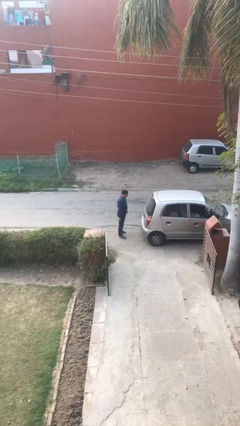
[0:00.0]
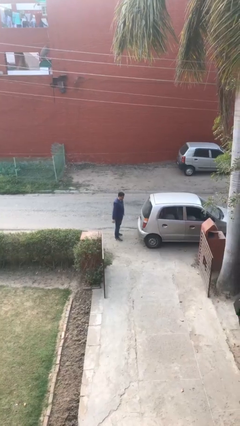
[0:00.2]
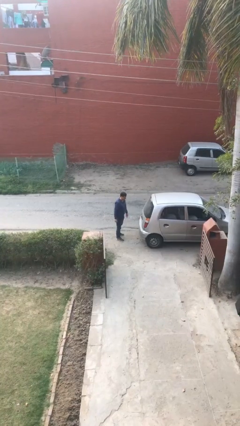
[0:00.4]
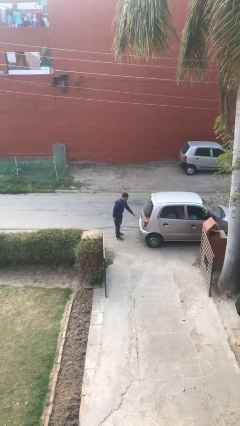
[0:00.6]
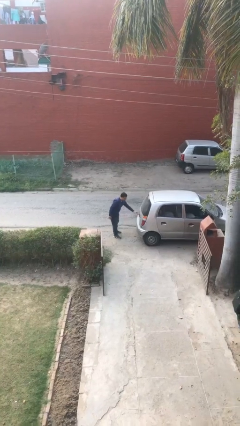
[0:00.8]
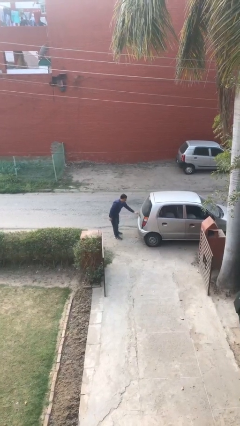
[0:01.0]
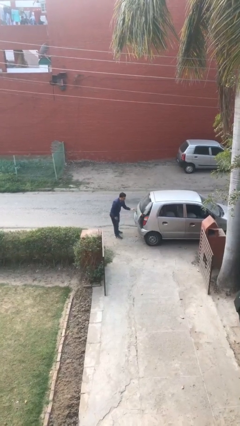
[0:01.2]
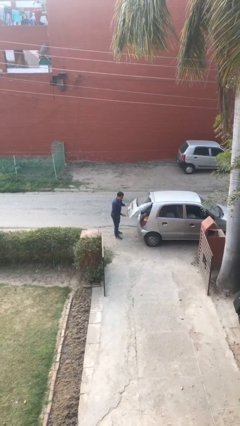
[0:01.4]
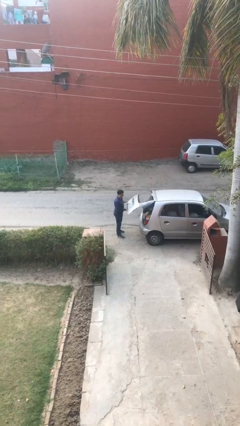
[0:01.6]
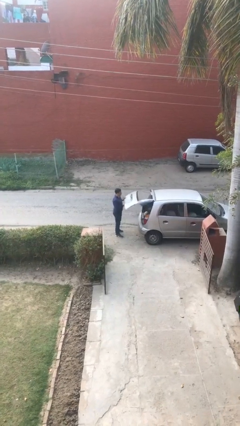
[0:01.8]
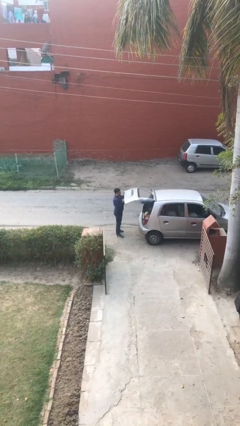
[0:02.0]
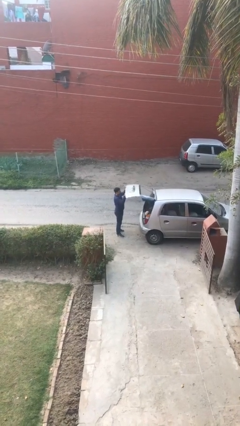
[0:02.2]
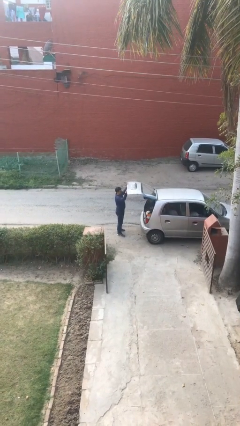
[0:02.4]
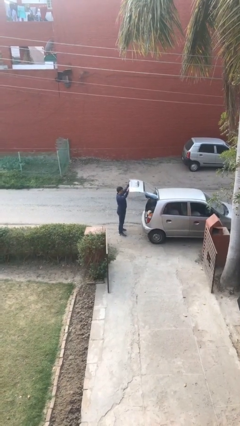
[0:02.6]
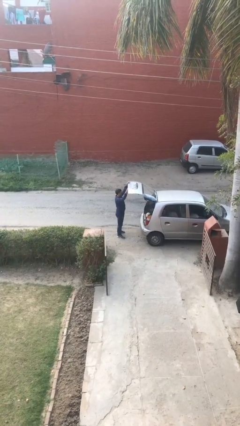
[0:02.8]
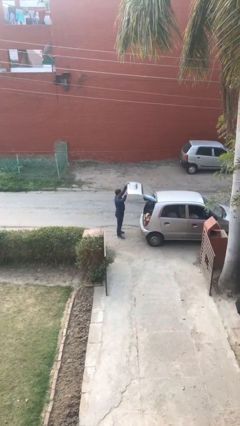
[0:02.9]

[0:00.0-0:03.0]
person opens car trunk

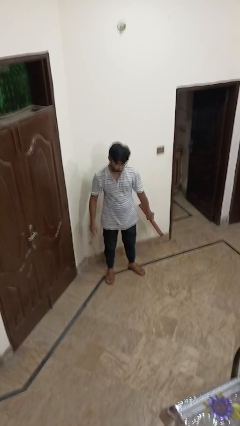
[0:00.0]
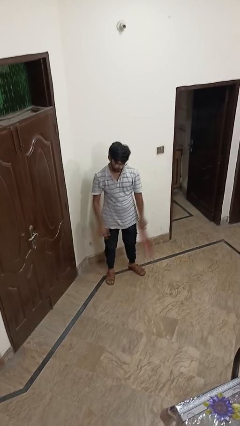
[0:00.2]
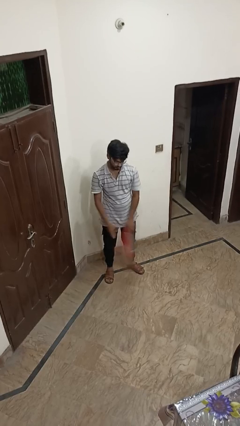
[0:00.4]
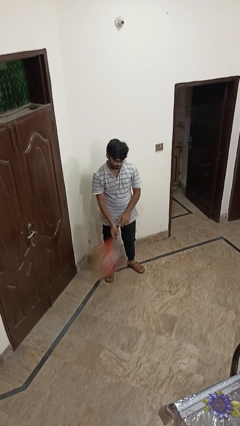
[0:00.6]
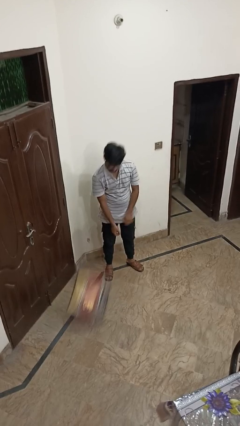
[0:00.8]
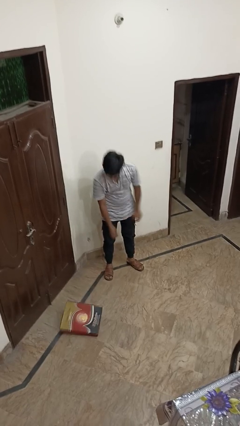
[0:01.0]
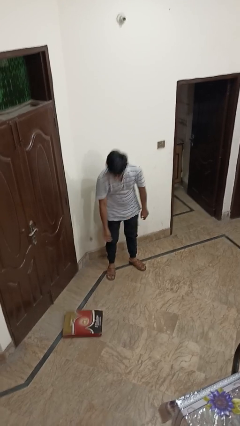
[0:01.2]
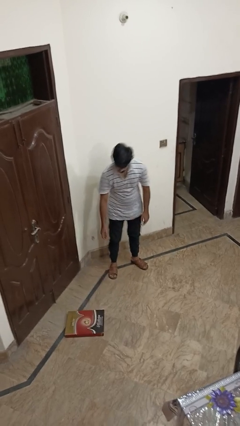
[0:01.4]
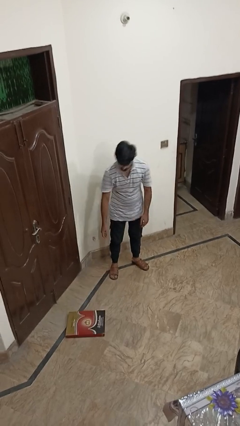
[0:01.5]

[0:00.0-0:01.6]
person drops object

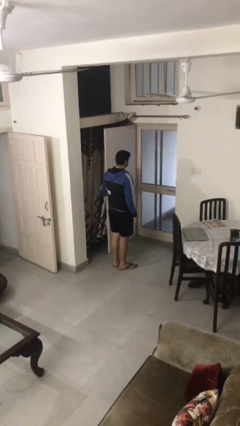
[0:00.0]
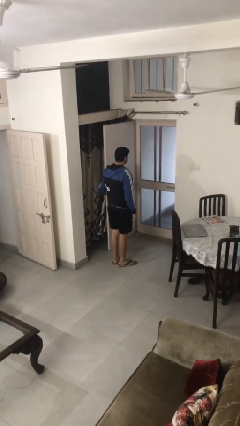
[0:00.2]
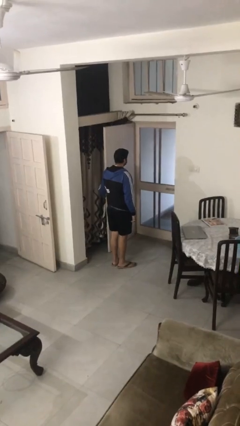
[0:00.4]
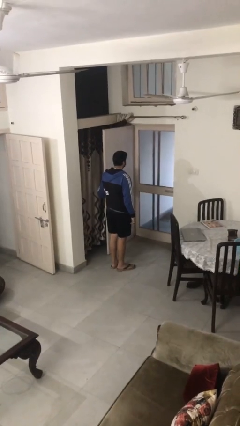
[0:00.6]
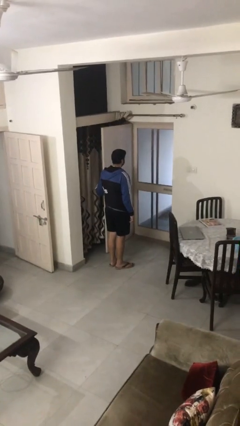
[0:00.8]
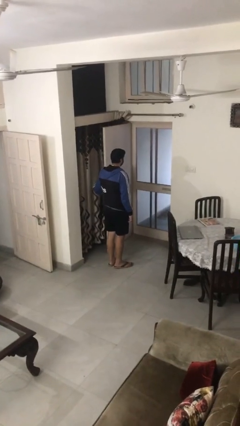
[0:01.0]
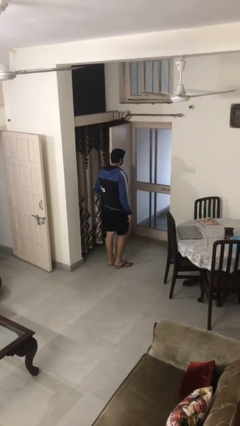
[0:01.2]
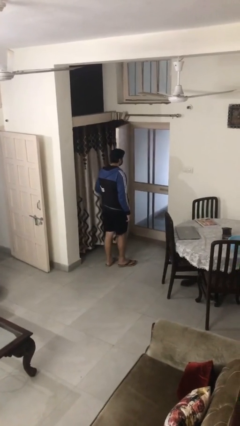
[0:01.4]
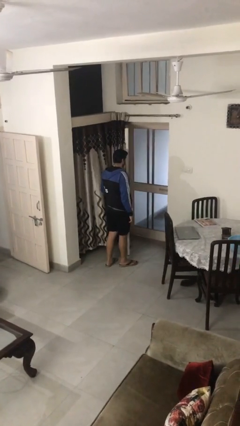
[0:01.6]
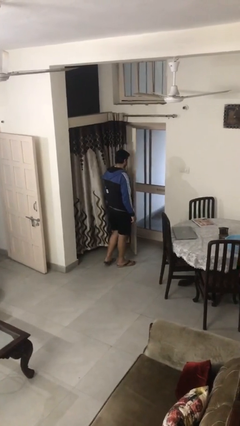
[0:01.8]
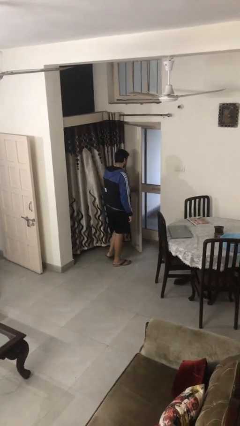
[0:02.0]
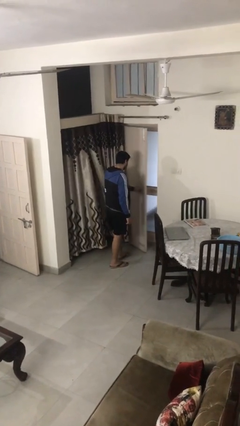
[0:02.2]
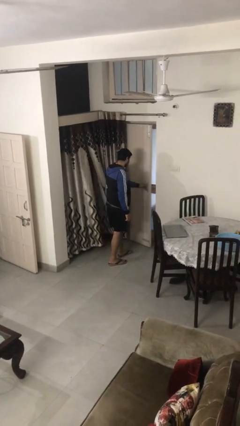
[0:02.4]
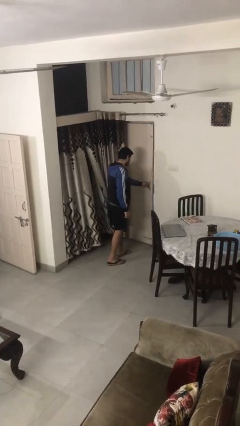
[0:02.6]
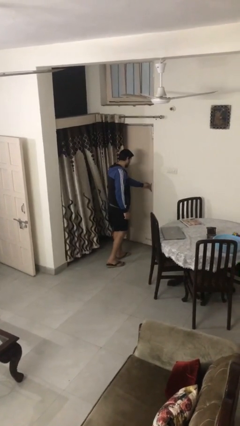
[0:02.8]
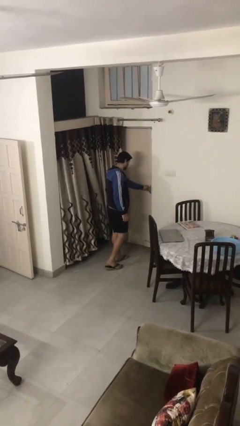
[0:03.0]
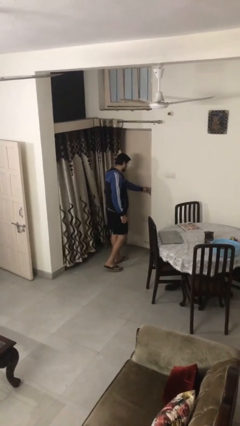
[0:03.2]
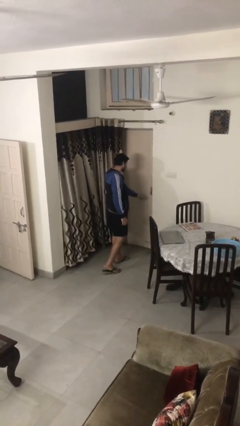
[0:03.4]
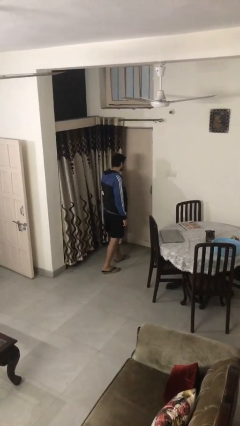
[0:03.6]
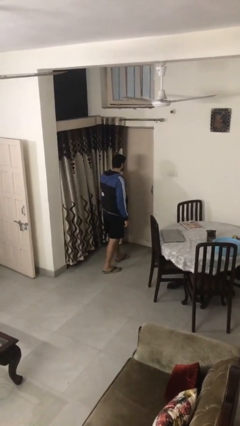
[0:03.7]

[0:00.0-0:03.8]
person closes facility door

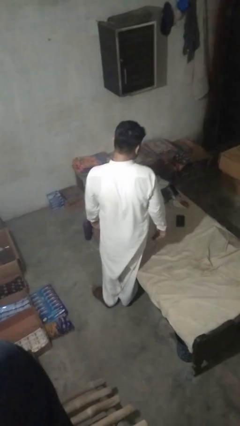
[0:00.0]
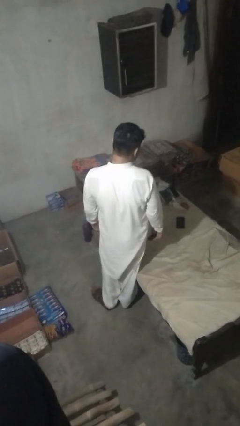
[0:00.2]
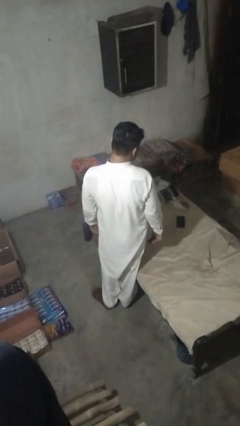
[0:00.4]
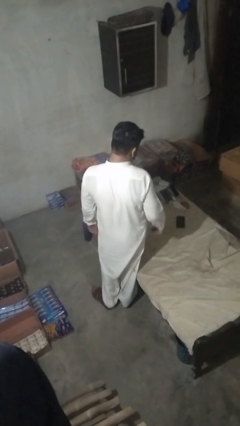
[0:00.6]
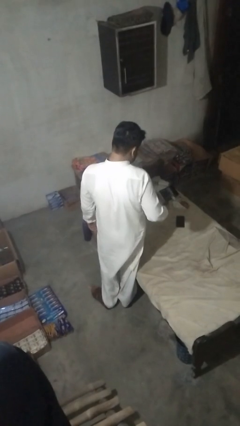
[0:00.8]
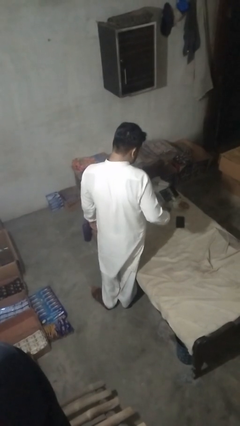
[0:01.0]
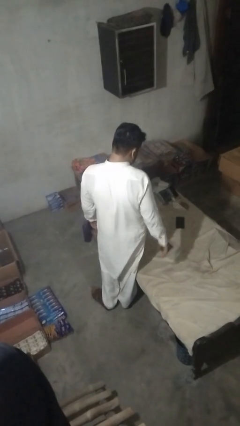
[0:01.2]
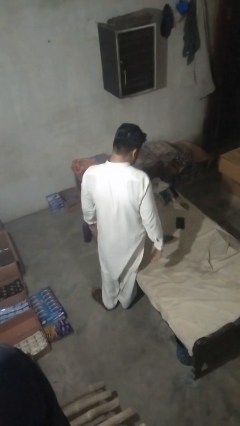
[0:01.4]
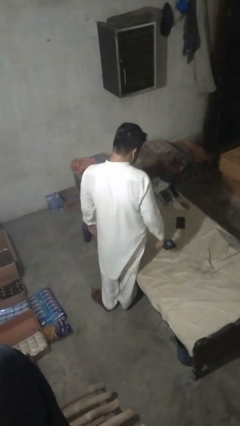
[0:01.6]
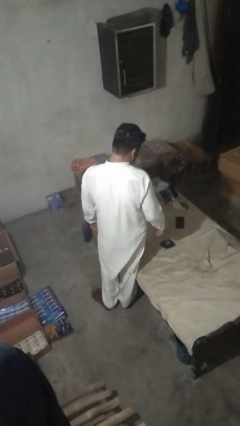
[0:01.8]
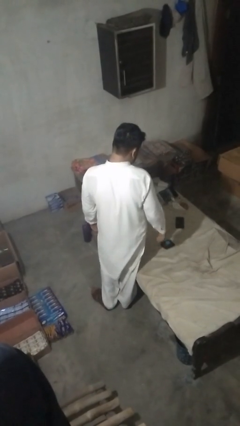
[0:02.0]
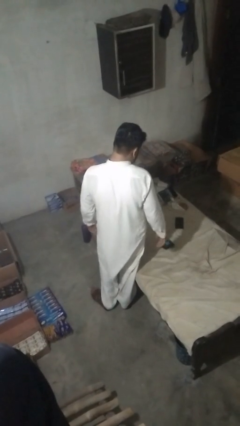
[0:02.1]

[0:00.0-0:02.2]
person throws object on bed

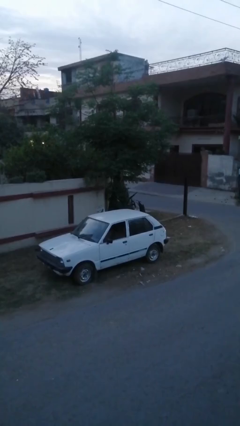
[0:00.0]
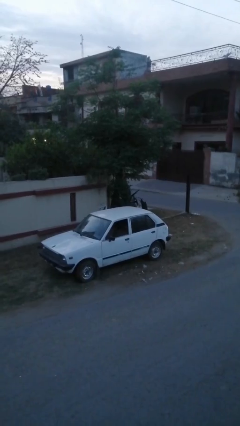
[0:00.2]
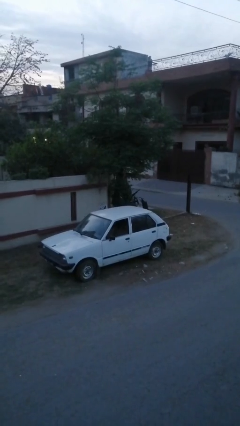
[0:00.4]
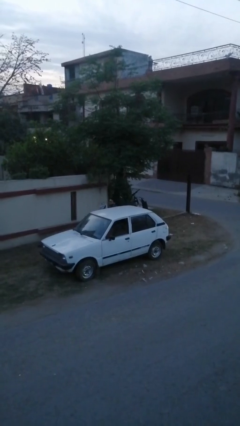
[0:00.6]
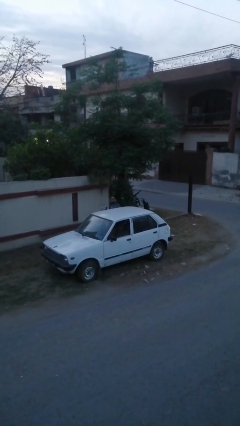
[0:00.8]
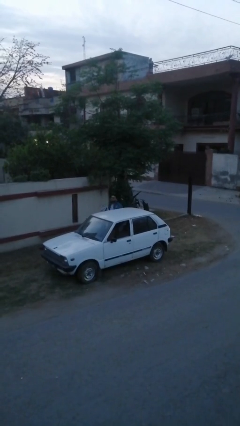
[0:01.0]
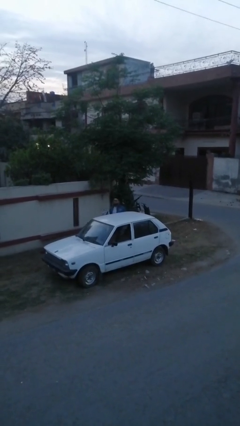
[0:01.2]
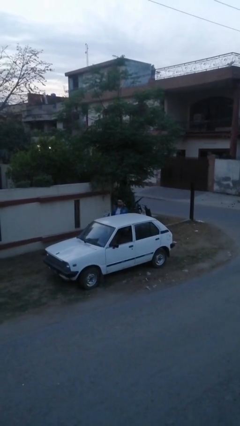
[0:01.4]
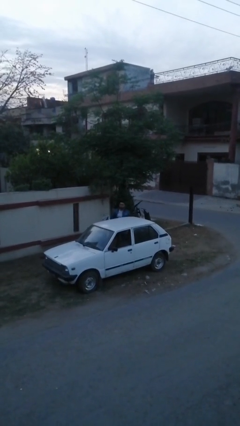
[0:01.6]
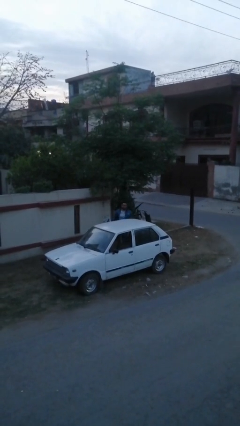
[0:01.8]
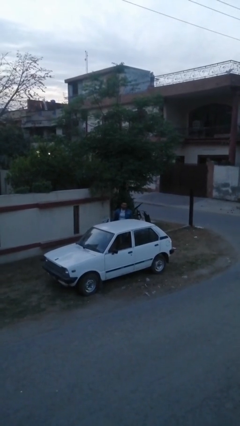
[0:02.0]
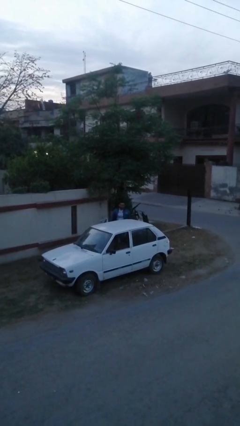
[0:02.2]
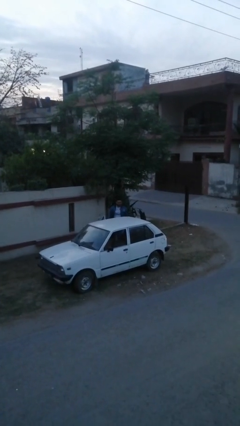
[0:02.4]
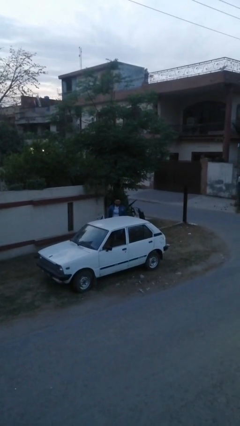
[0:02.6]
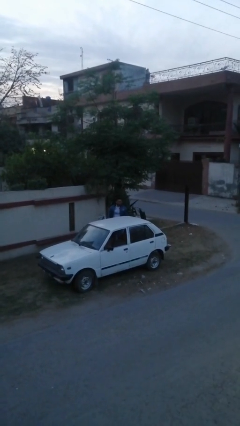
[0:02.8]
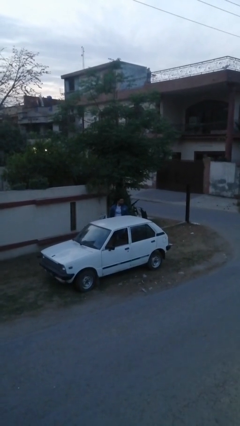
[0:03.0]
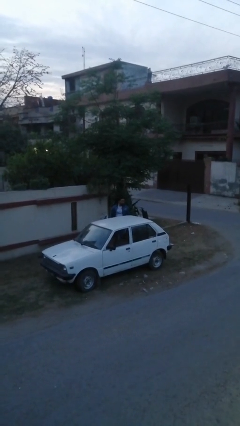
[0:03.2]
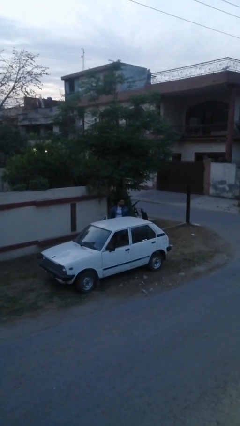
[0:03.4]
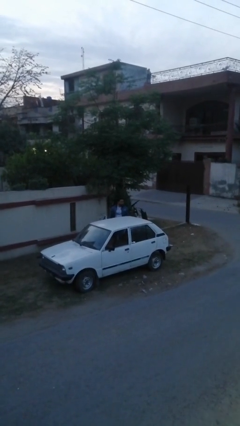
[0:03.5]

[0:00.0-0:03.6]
person exits car

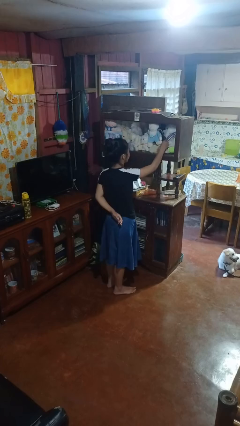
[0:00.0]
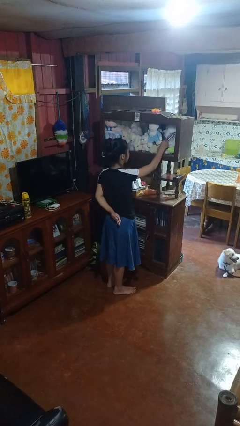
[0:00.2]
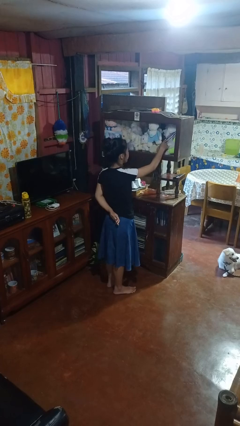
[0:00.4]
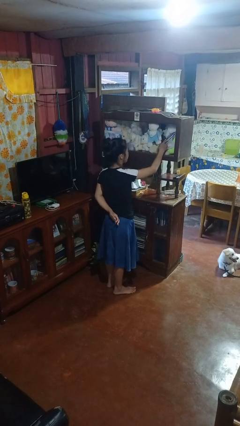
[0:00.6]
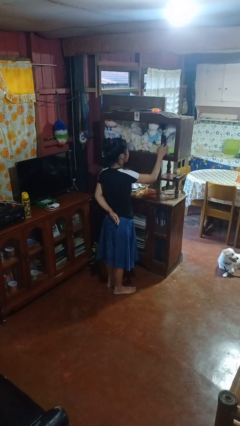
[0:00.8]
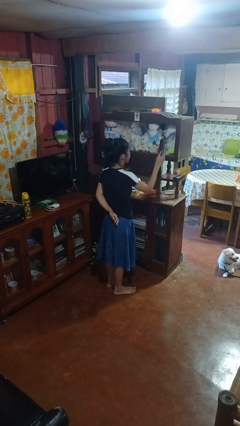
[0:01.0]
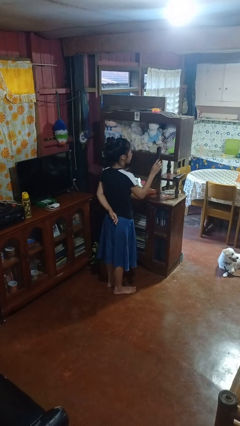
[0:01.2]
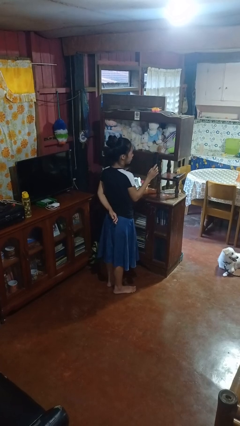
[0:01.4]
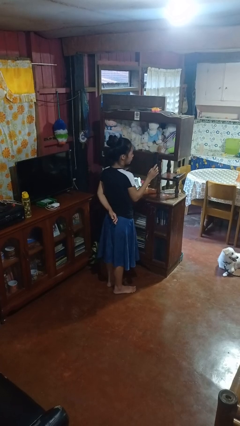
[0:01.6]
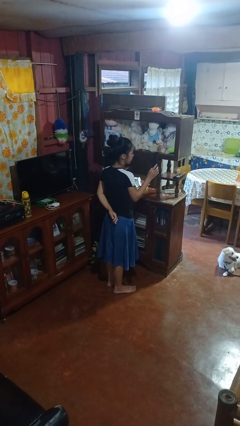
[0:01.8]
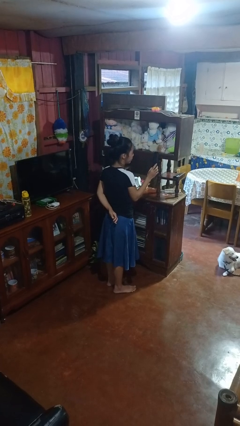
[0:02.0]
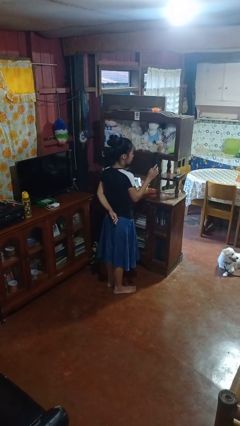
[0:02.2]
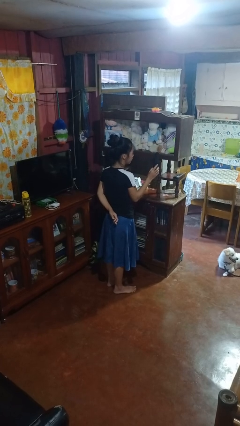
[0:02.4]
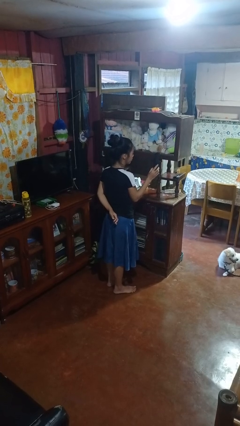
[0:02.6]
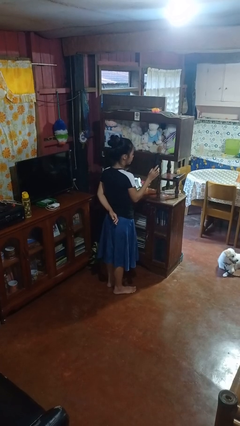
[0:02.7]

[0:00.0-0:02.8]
person picks up object from shelf

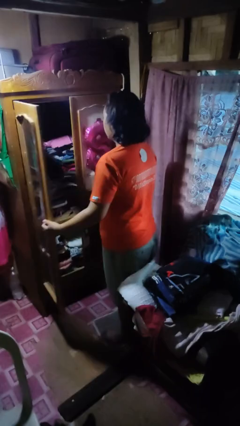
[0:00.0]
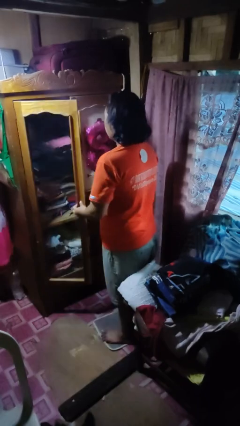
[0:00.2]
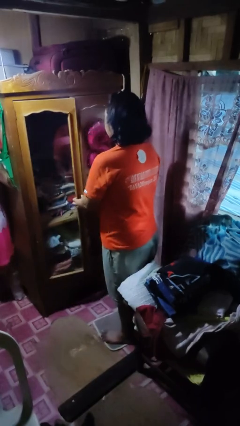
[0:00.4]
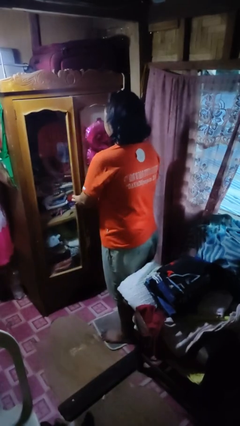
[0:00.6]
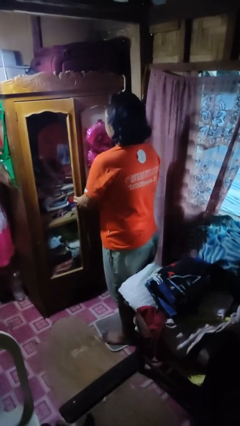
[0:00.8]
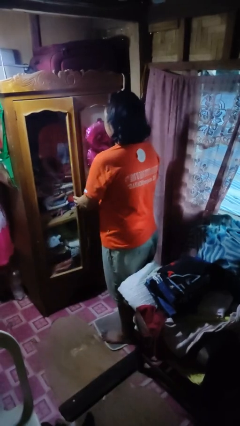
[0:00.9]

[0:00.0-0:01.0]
person closes closet door
